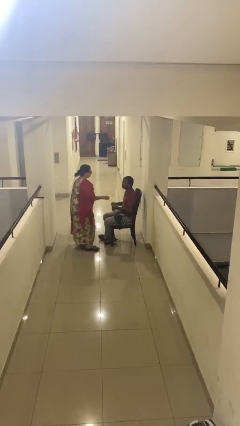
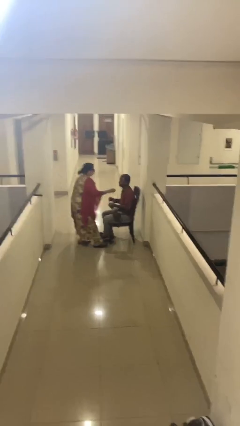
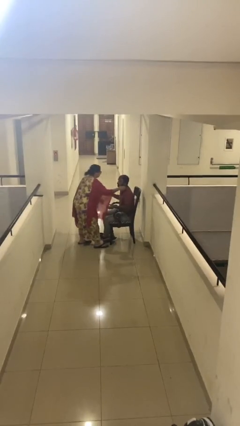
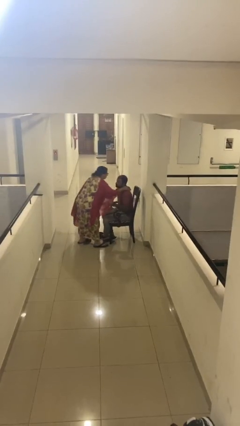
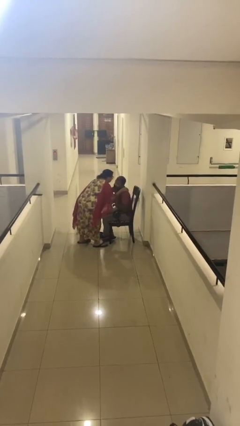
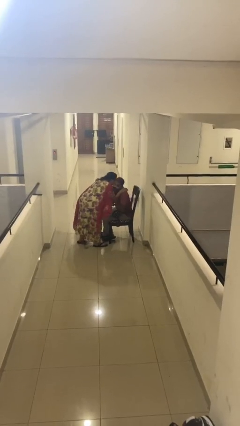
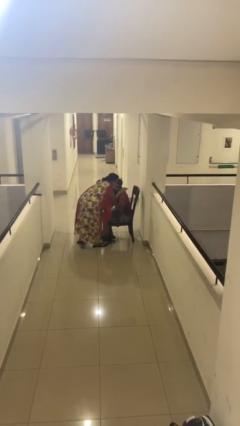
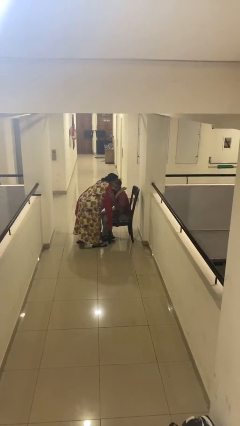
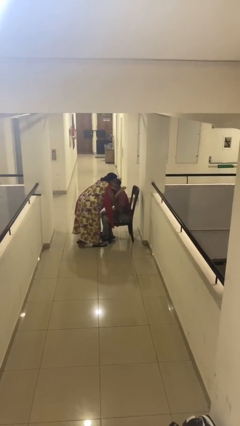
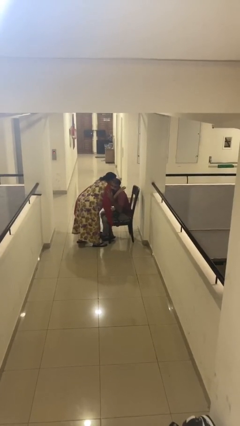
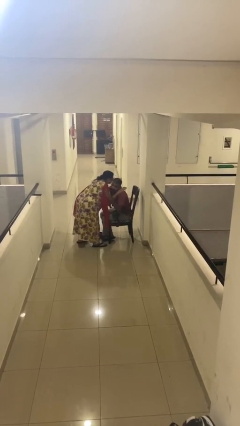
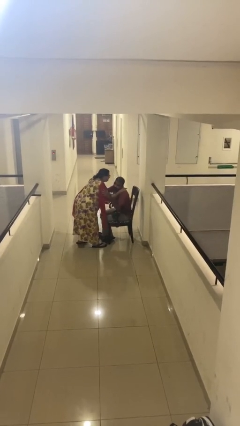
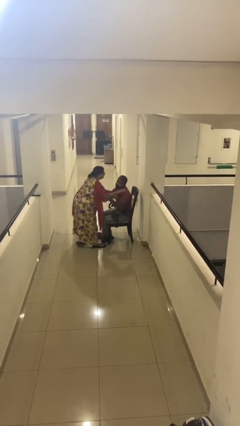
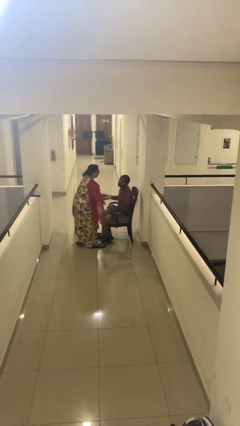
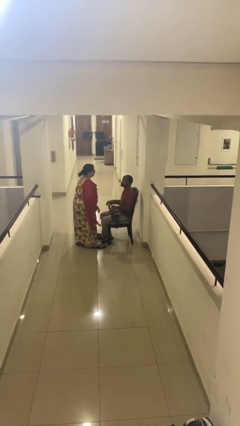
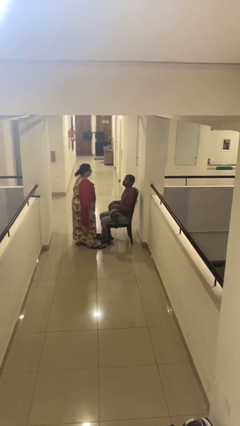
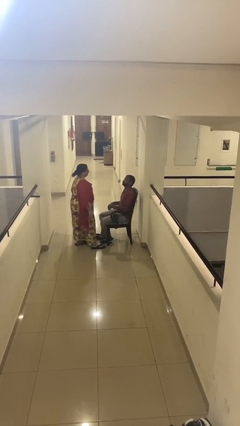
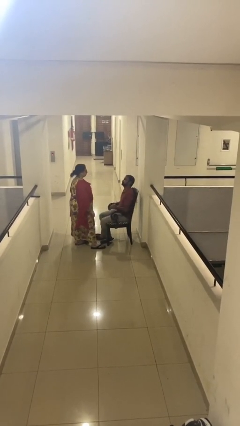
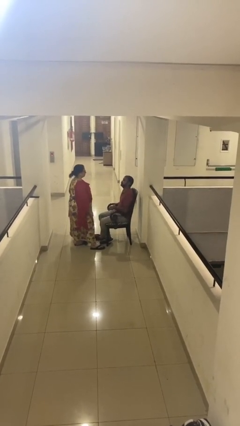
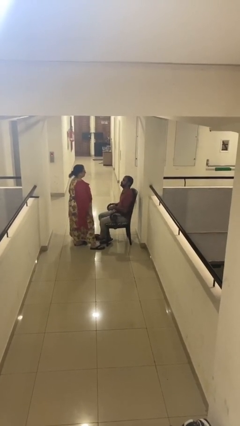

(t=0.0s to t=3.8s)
person embraces person

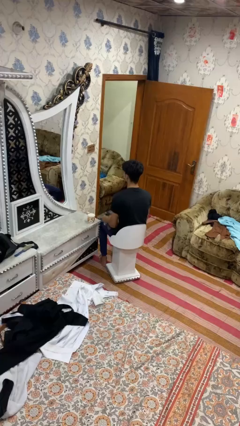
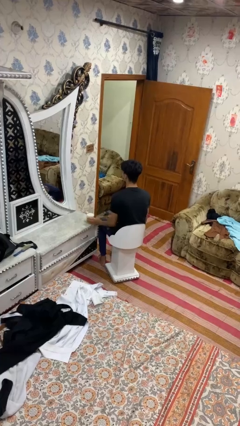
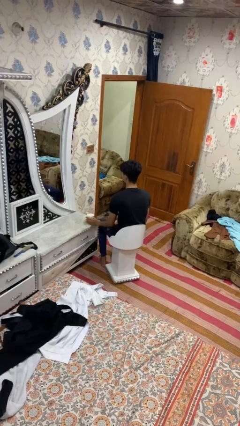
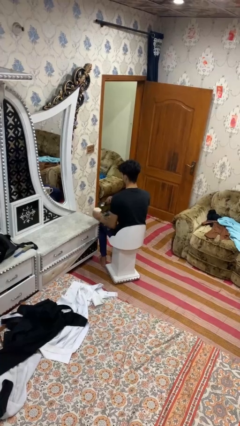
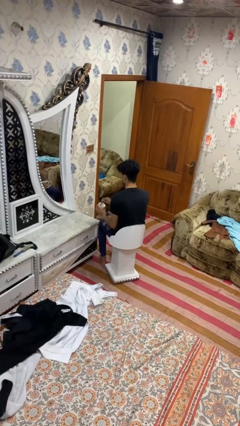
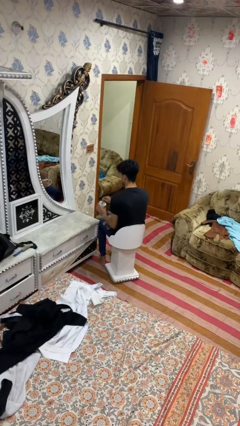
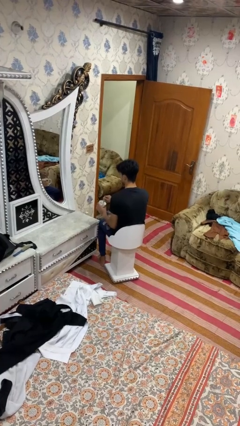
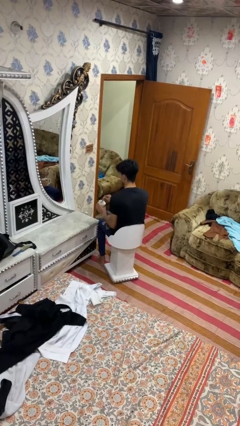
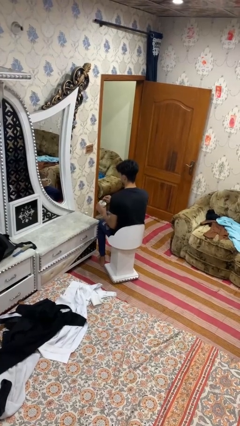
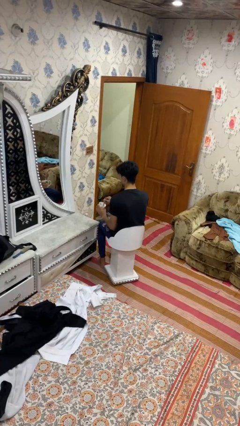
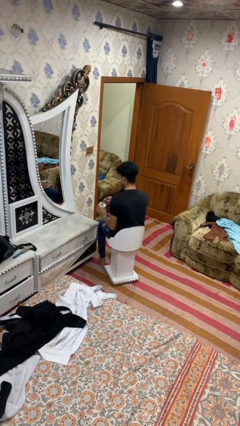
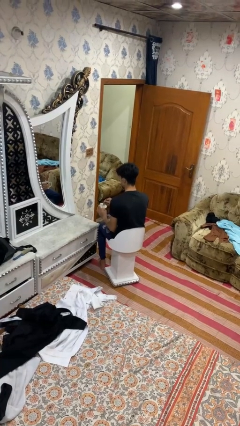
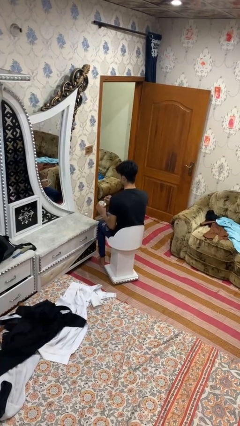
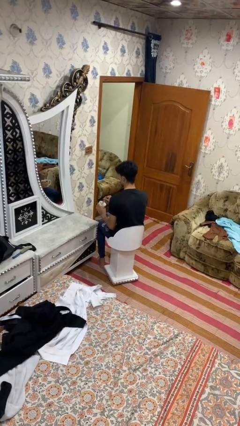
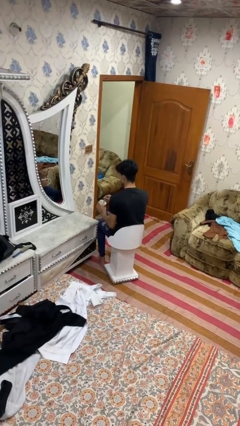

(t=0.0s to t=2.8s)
person stirs mug

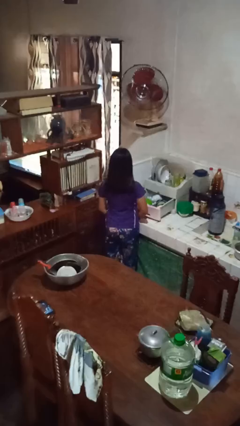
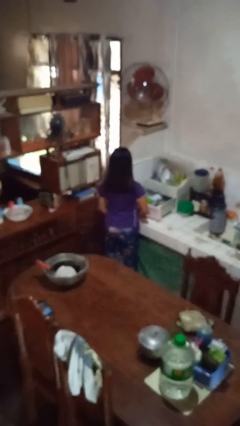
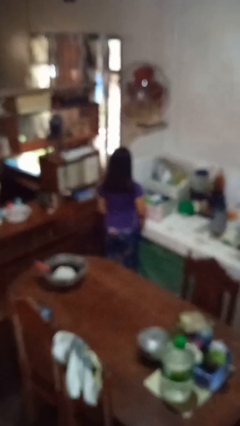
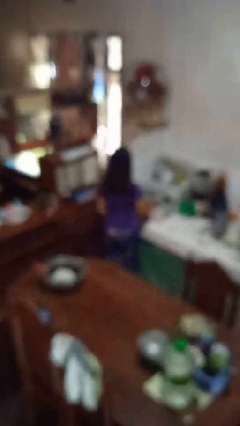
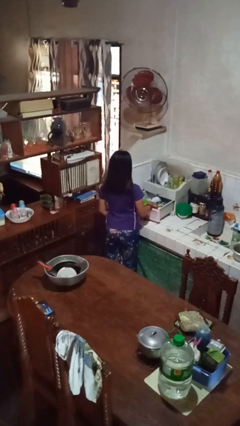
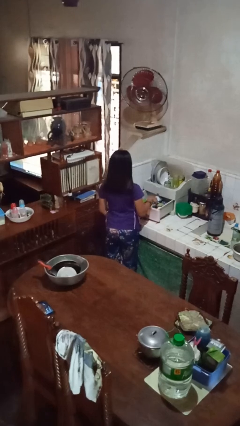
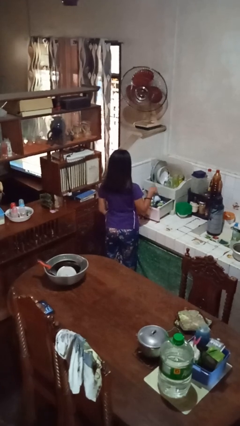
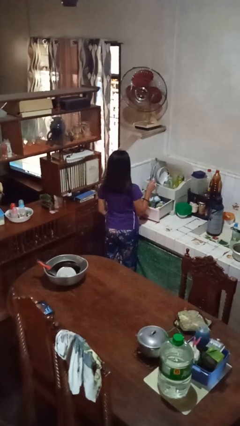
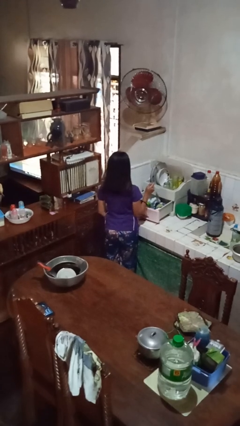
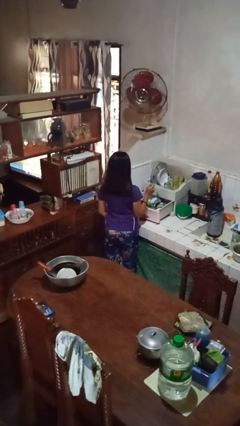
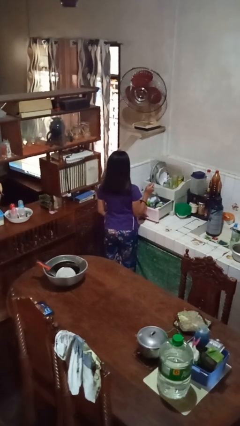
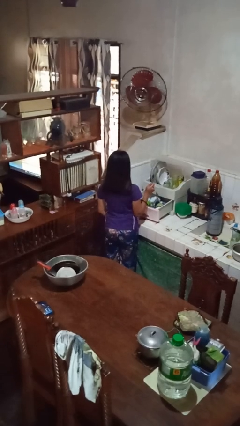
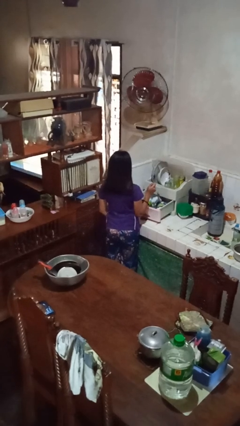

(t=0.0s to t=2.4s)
person takes object from kitchen drawer

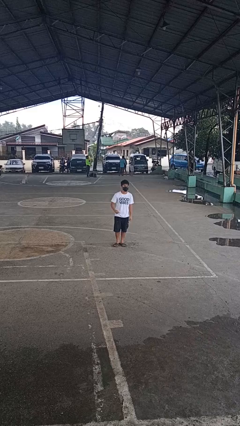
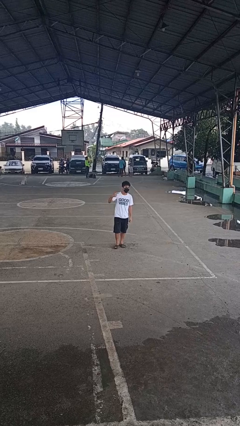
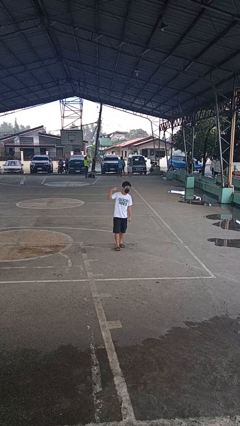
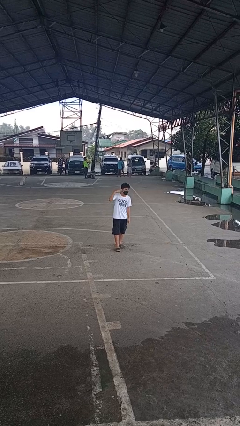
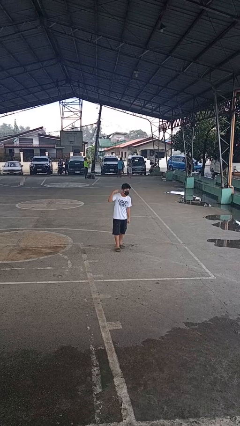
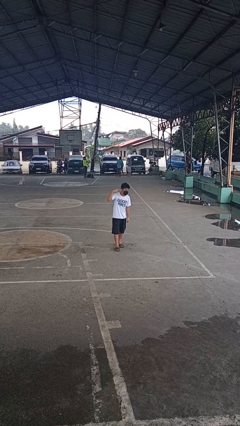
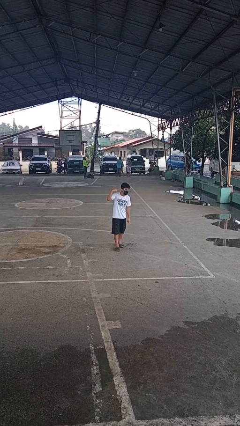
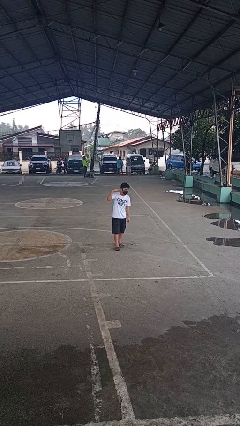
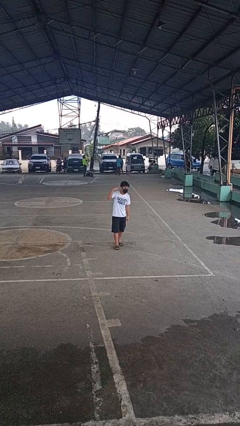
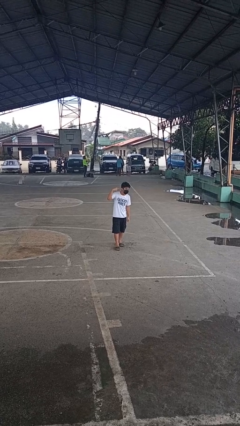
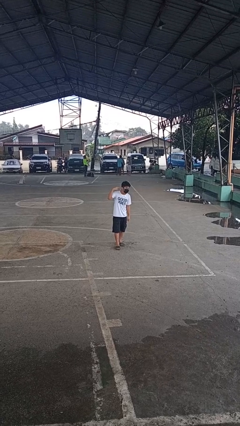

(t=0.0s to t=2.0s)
person gestures listen closely

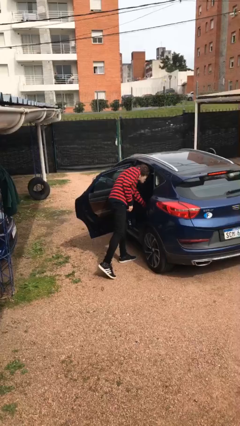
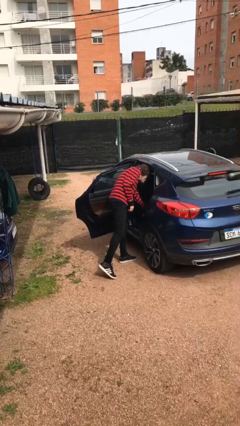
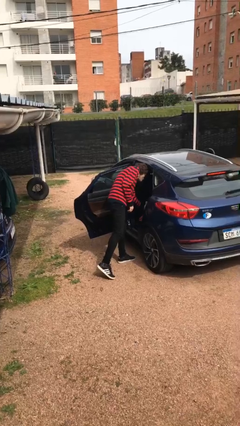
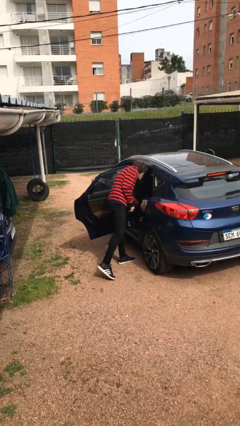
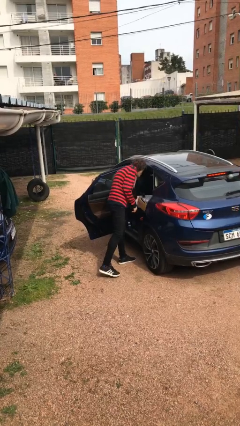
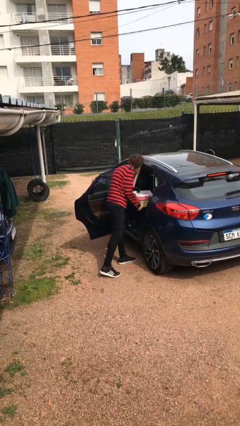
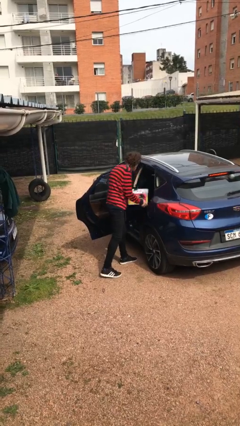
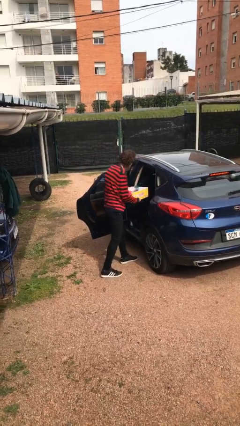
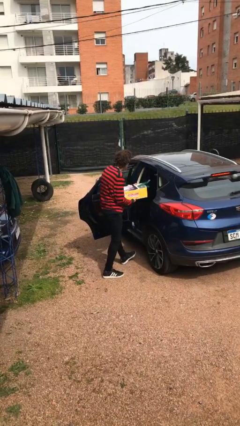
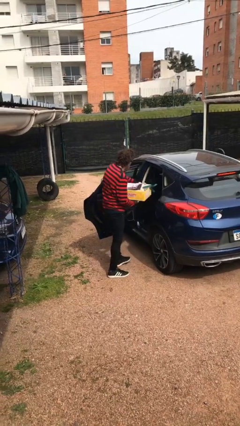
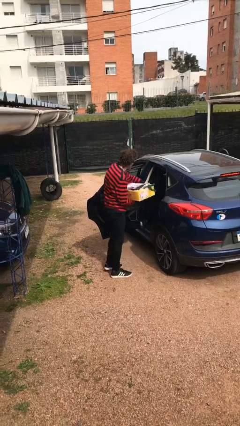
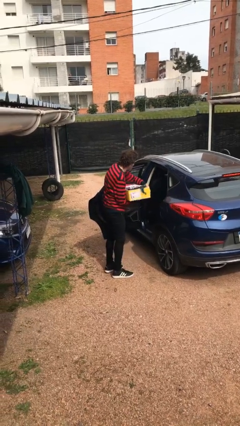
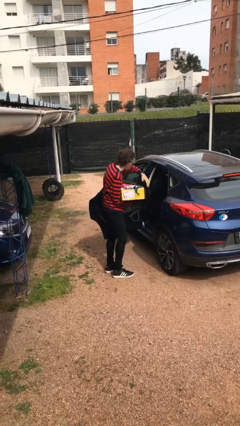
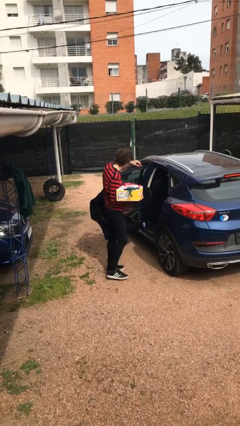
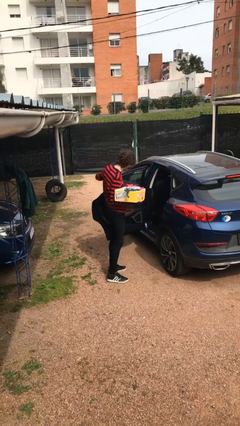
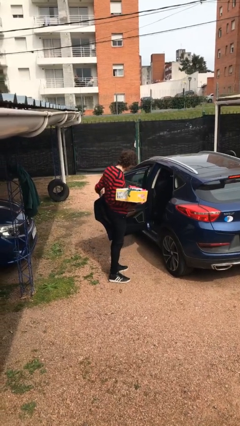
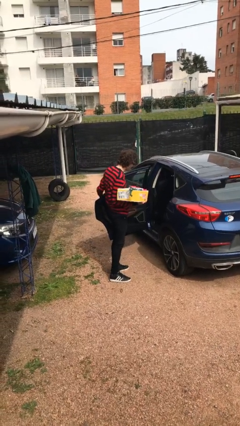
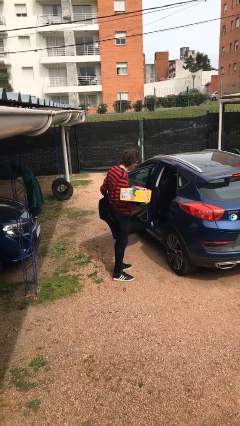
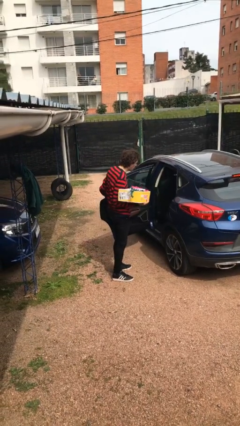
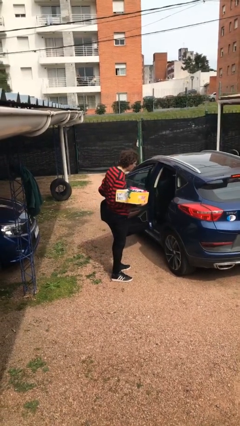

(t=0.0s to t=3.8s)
person unloads car

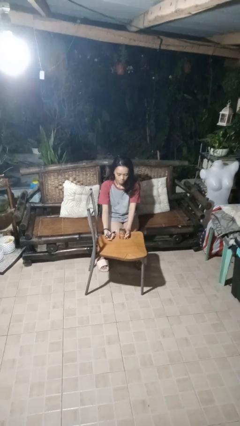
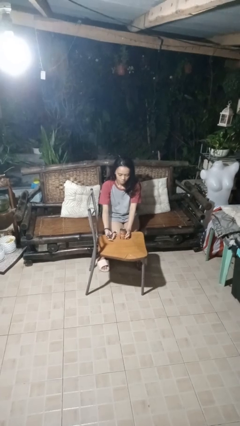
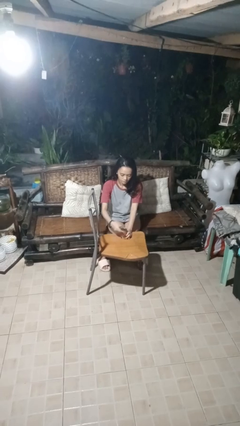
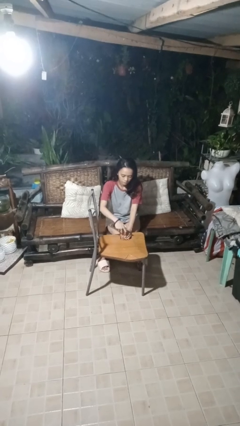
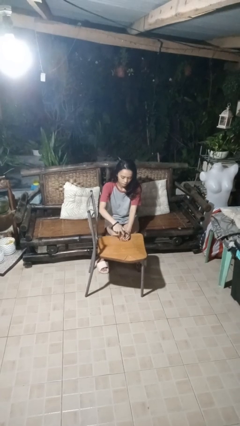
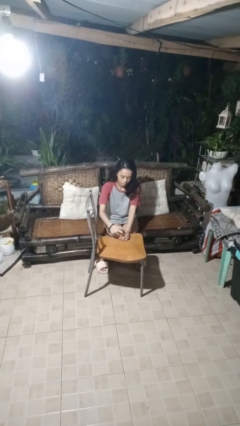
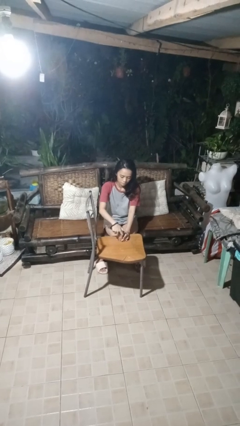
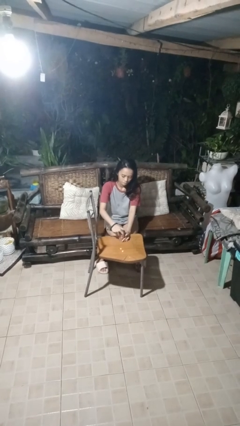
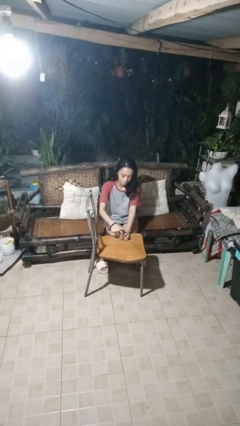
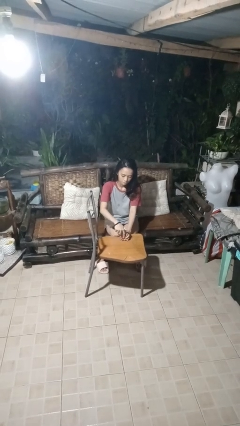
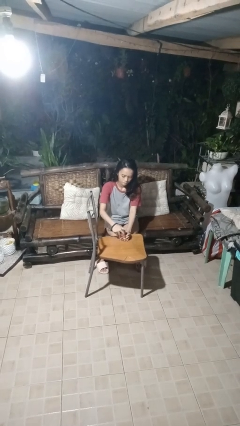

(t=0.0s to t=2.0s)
person opens can with can opener

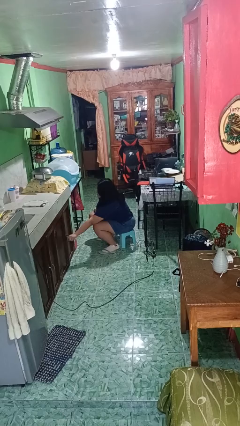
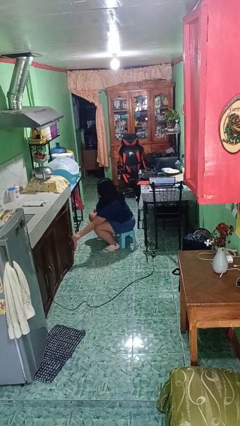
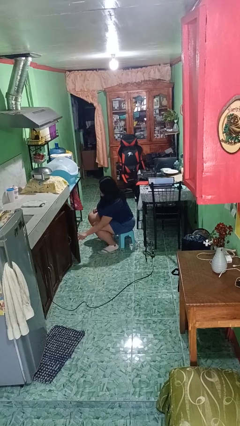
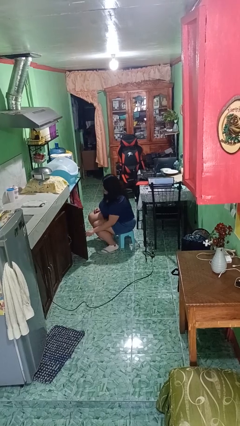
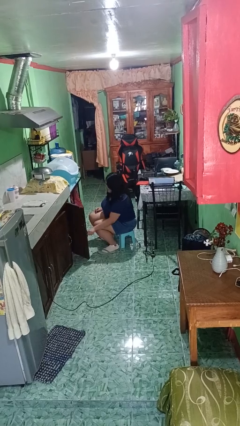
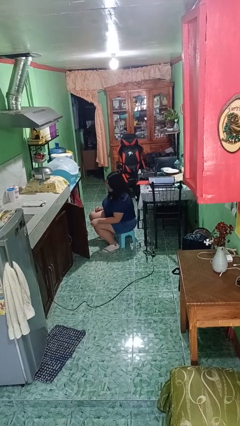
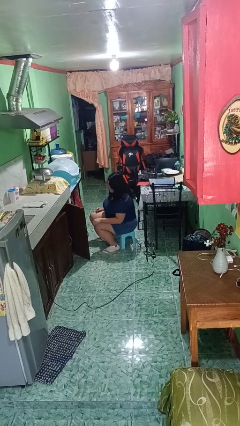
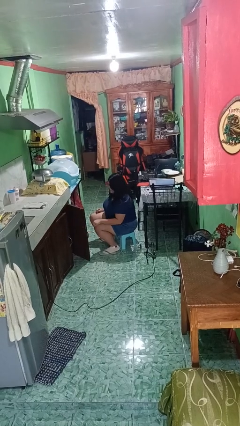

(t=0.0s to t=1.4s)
person opens cabinet
